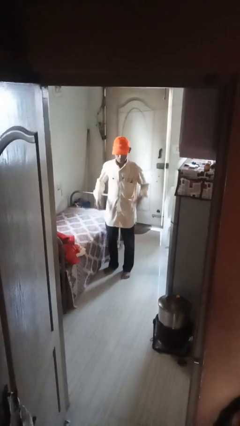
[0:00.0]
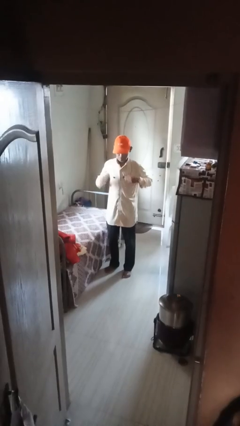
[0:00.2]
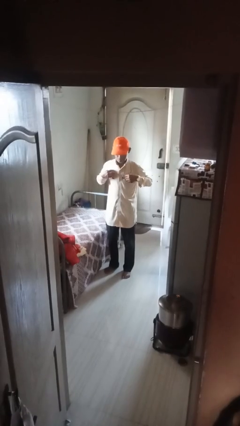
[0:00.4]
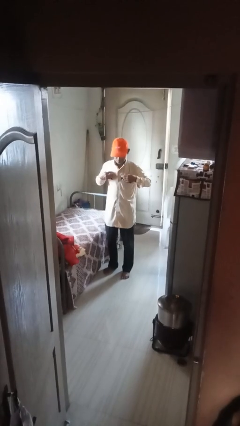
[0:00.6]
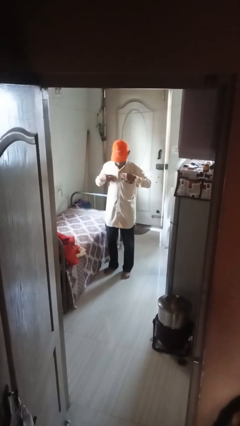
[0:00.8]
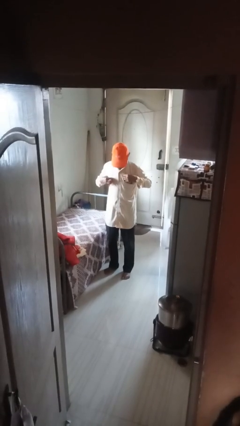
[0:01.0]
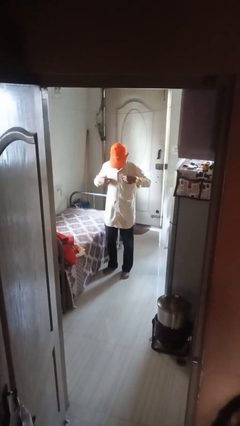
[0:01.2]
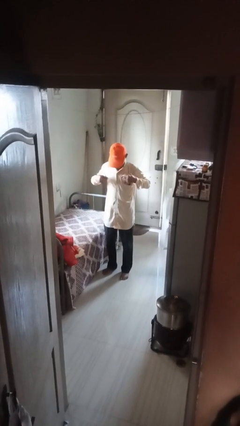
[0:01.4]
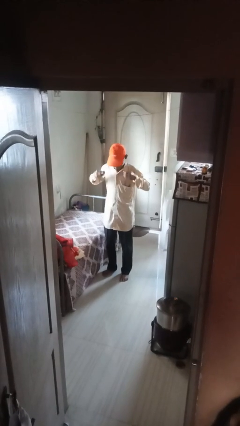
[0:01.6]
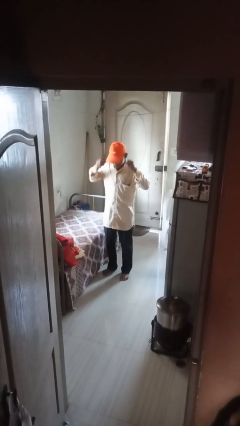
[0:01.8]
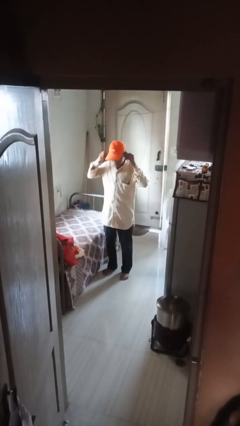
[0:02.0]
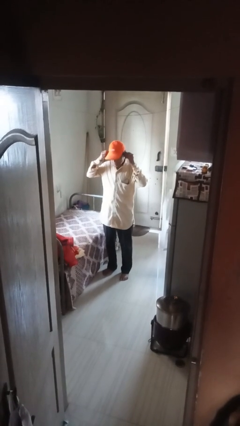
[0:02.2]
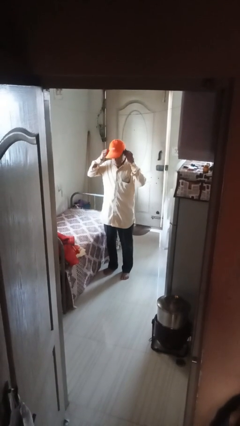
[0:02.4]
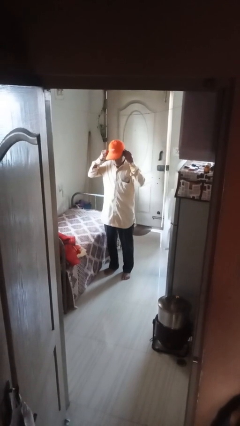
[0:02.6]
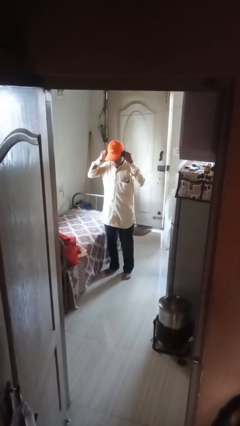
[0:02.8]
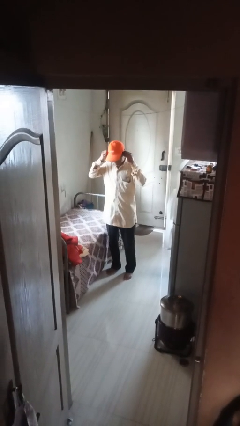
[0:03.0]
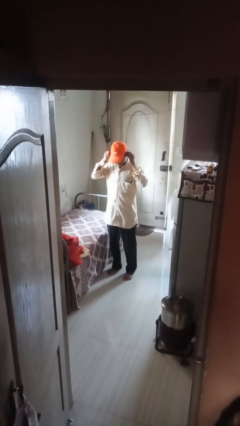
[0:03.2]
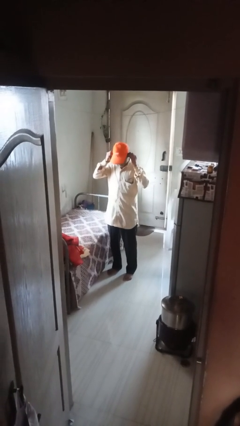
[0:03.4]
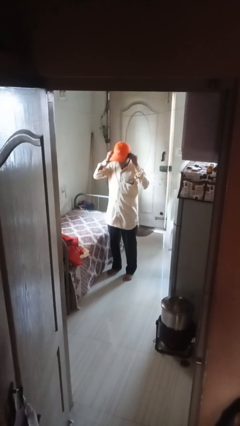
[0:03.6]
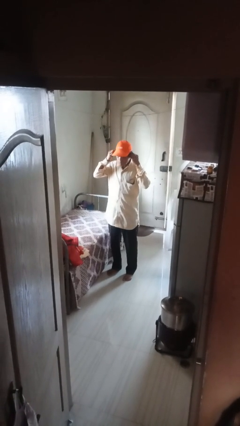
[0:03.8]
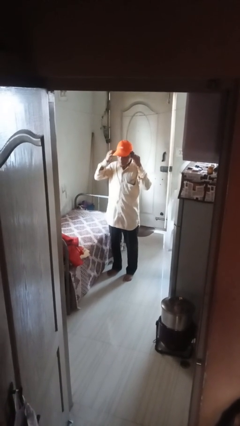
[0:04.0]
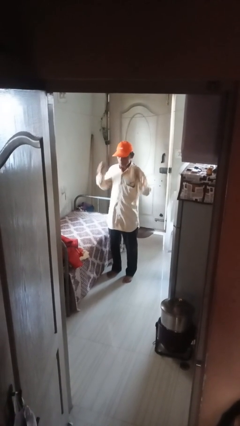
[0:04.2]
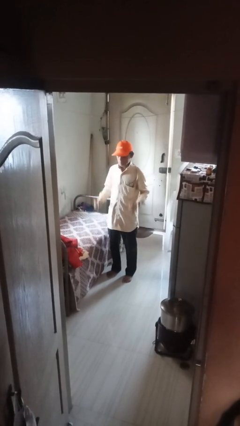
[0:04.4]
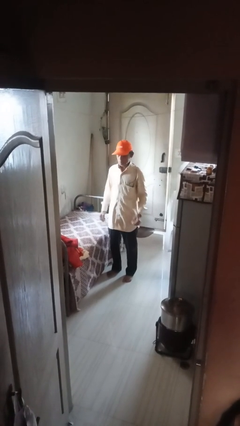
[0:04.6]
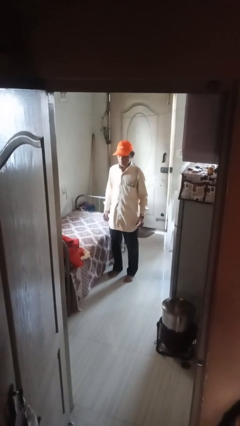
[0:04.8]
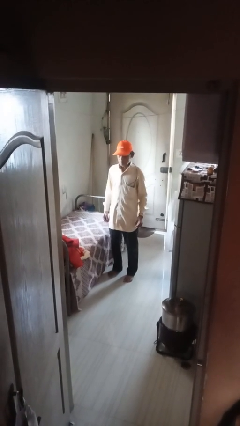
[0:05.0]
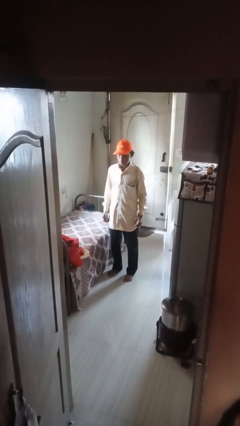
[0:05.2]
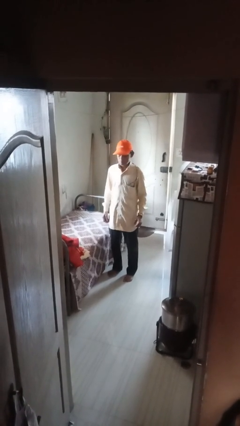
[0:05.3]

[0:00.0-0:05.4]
person puts on headphones

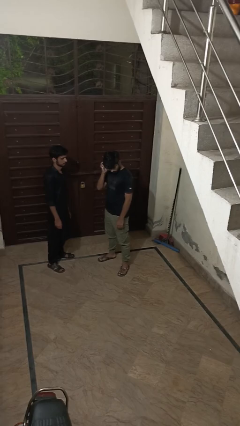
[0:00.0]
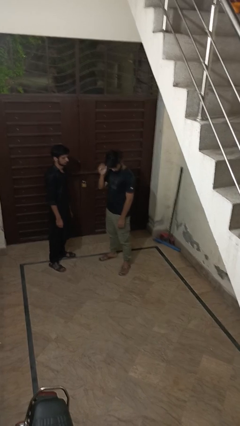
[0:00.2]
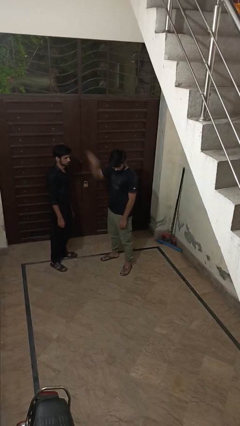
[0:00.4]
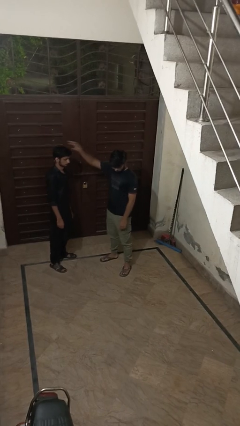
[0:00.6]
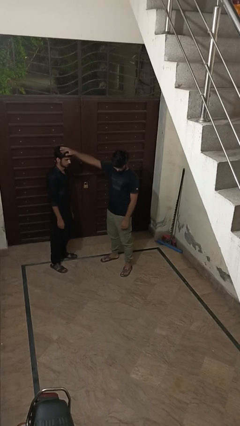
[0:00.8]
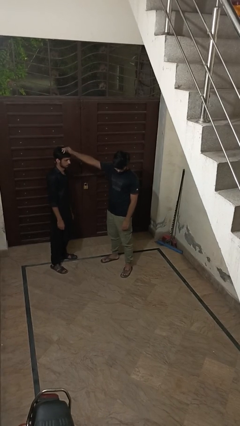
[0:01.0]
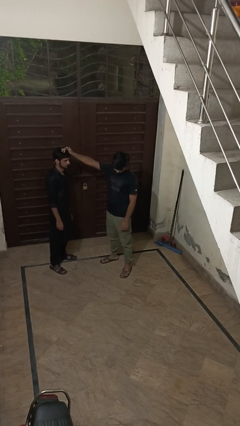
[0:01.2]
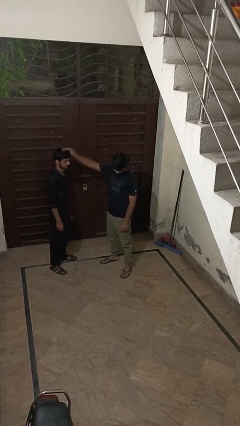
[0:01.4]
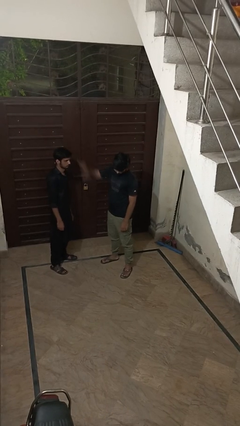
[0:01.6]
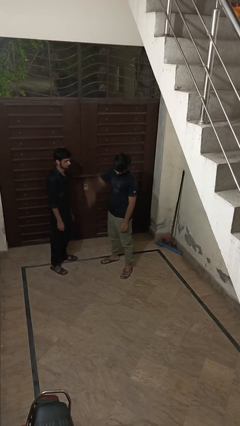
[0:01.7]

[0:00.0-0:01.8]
person grabs person by hair

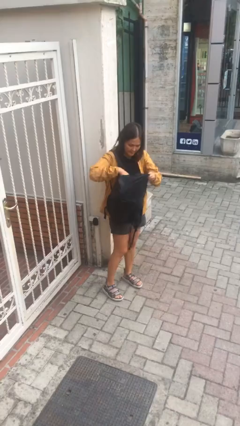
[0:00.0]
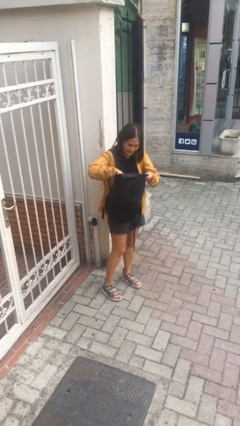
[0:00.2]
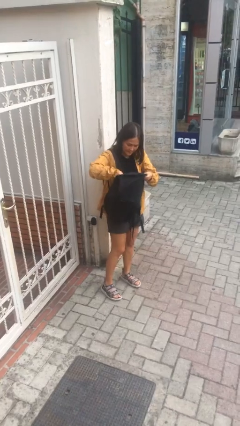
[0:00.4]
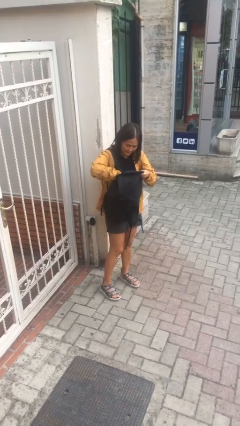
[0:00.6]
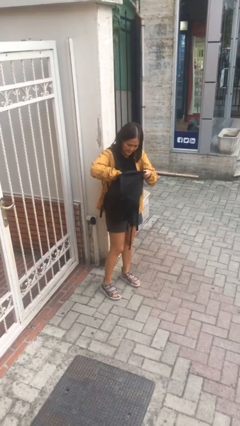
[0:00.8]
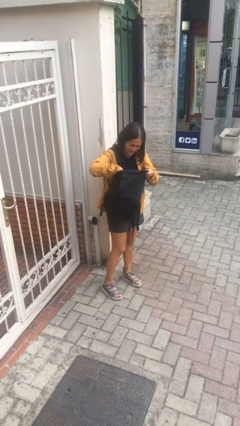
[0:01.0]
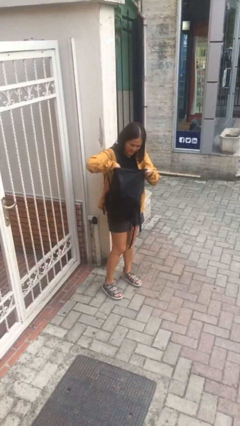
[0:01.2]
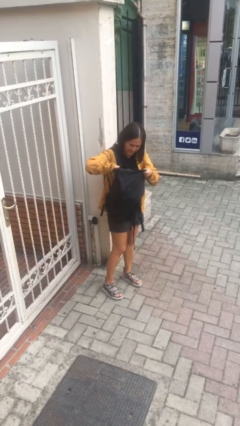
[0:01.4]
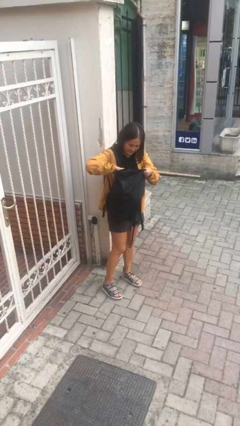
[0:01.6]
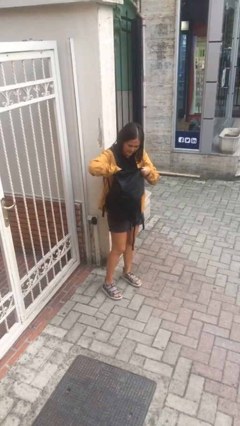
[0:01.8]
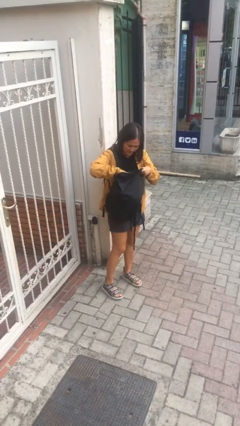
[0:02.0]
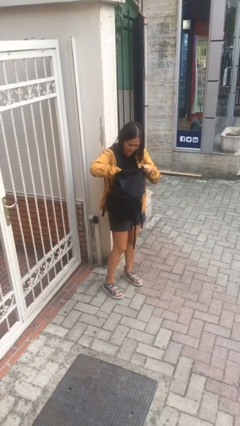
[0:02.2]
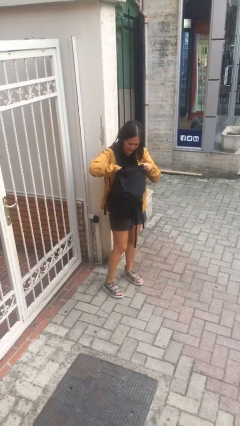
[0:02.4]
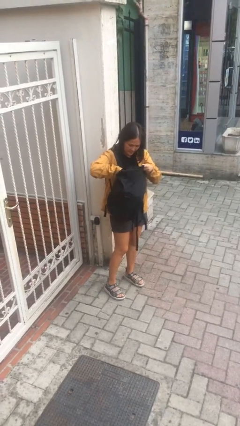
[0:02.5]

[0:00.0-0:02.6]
person searches in backpack

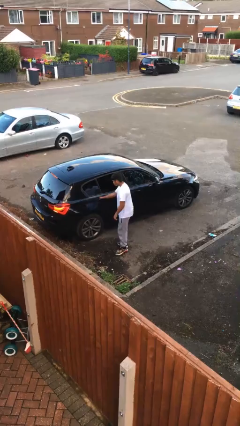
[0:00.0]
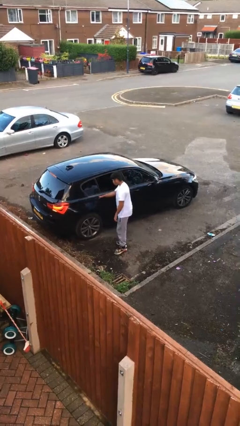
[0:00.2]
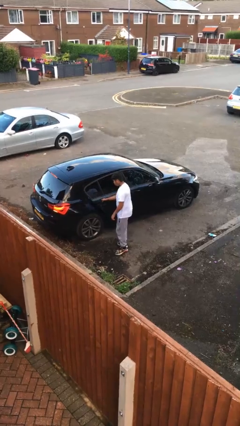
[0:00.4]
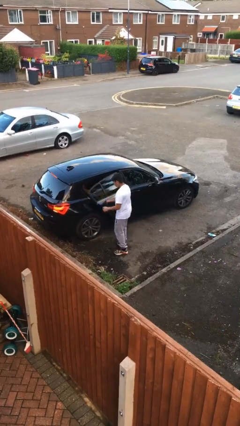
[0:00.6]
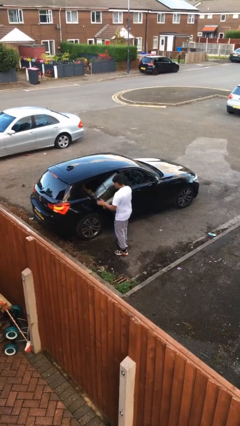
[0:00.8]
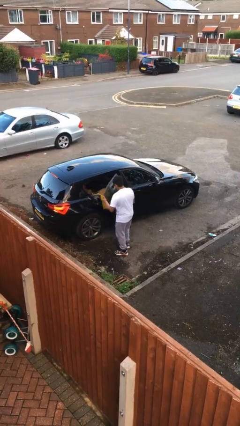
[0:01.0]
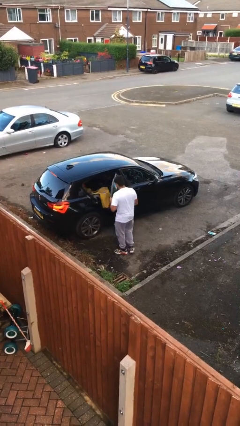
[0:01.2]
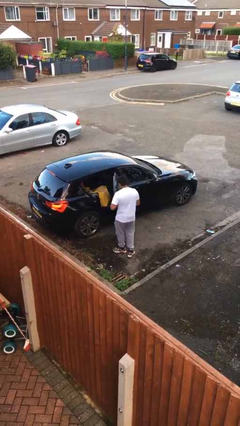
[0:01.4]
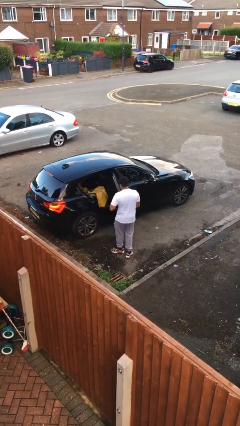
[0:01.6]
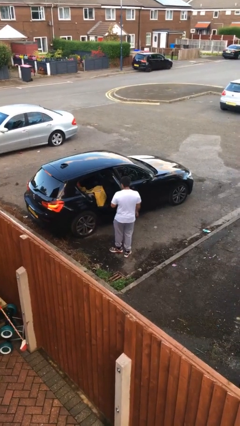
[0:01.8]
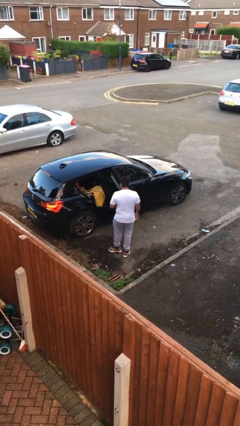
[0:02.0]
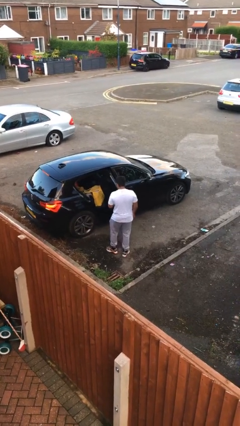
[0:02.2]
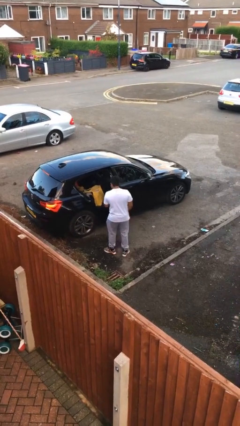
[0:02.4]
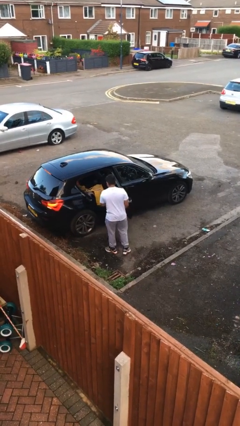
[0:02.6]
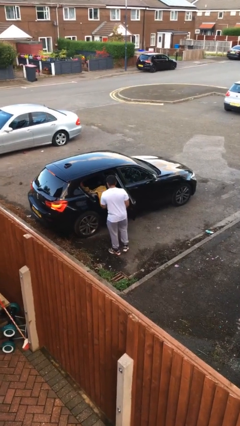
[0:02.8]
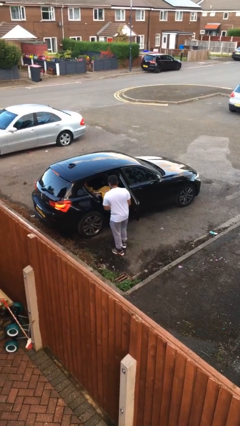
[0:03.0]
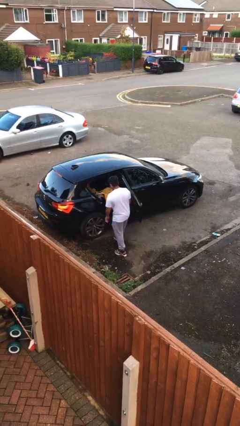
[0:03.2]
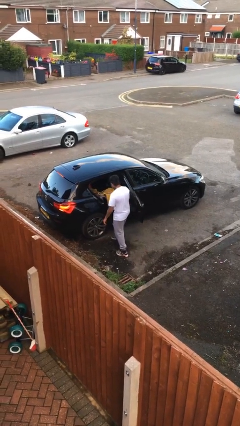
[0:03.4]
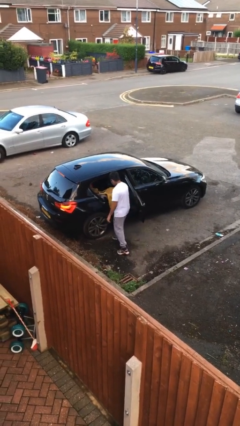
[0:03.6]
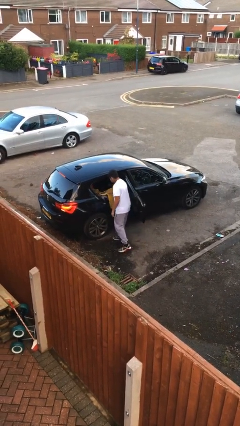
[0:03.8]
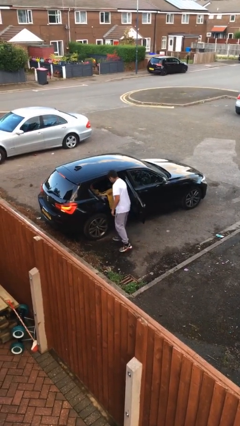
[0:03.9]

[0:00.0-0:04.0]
person opens car door

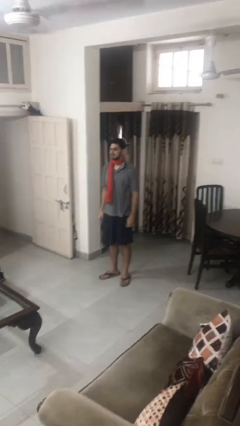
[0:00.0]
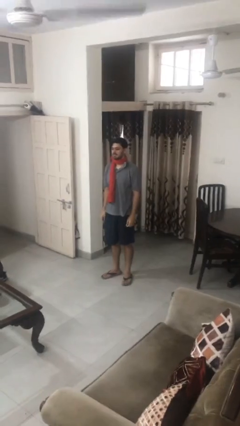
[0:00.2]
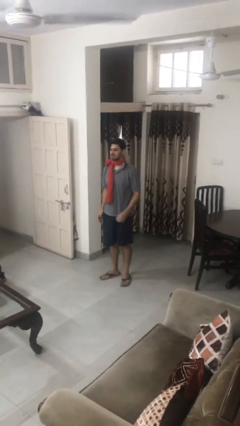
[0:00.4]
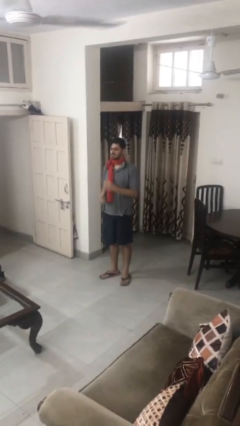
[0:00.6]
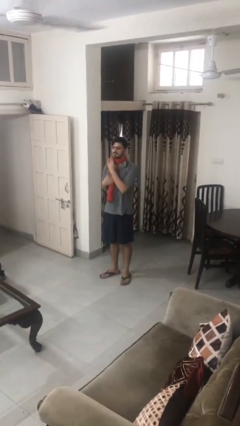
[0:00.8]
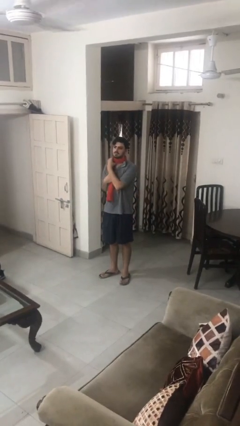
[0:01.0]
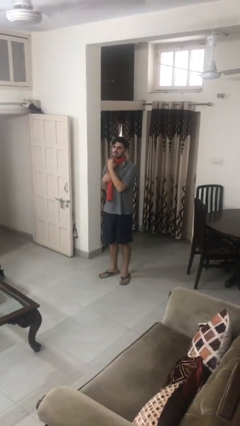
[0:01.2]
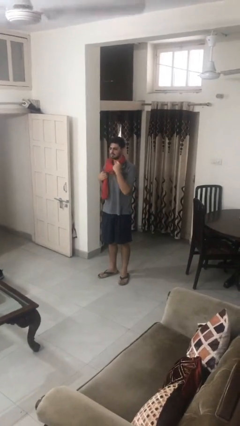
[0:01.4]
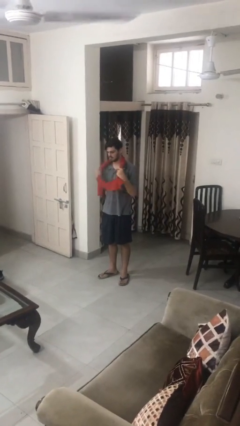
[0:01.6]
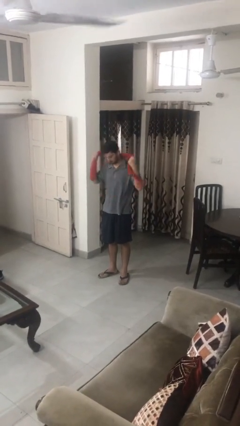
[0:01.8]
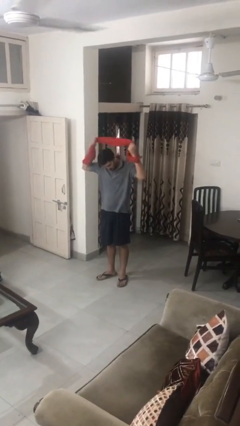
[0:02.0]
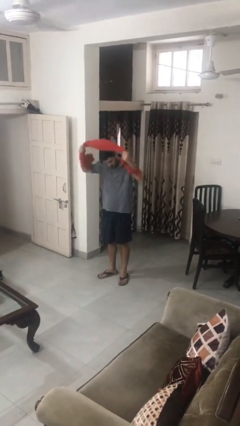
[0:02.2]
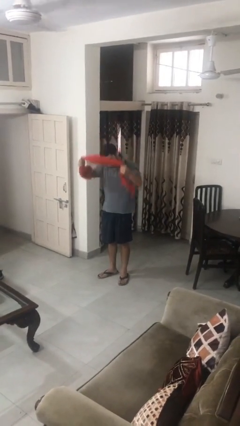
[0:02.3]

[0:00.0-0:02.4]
person takes off scarf

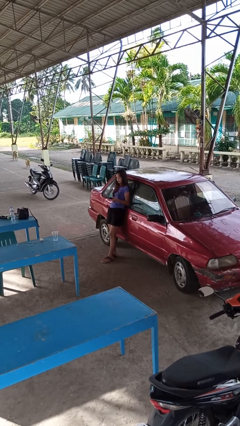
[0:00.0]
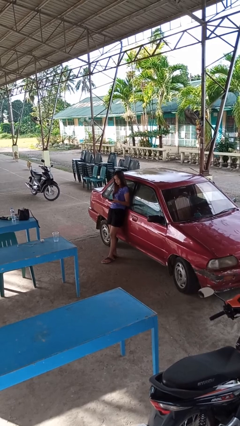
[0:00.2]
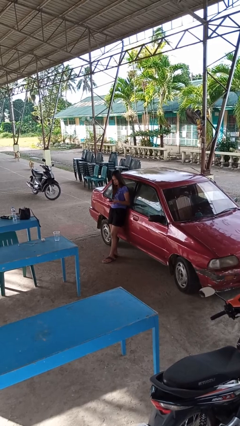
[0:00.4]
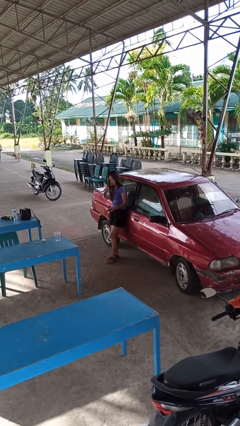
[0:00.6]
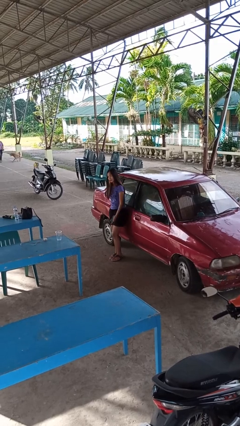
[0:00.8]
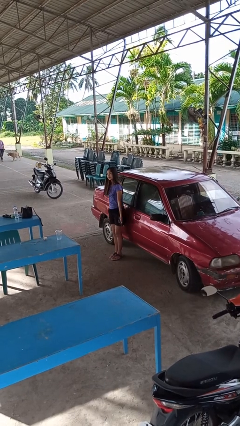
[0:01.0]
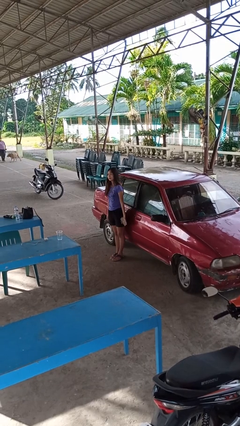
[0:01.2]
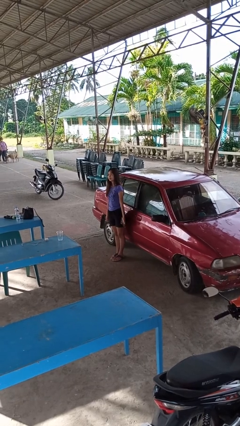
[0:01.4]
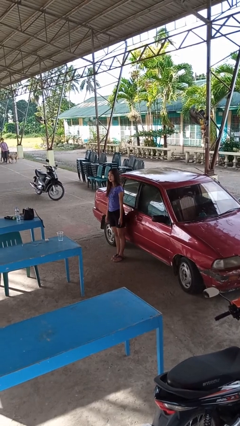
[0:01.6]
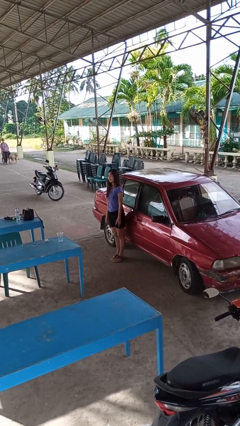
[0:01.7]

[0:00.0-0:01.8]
person leans against car
